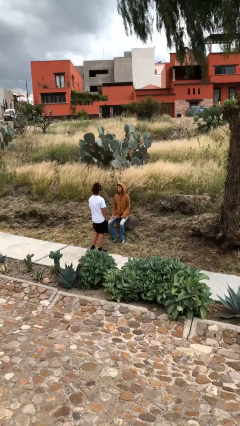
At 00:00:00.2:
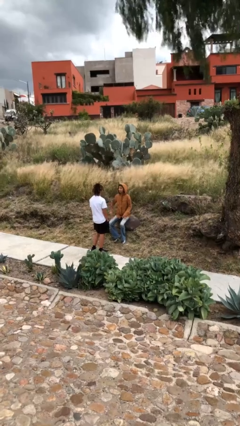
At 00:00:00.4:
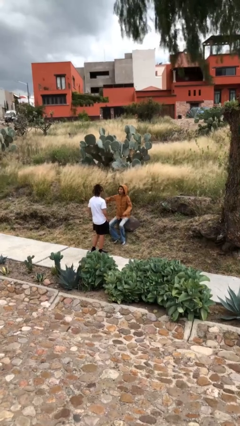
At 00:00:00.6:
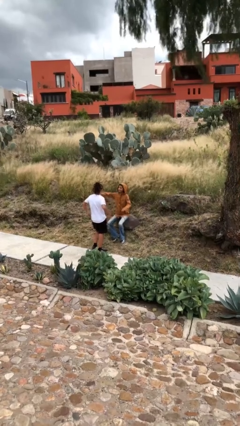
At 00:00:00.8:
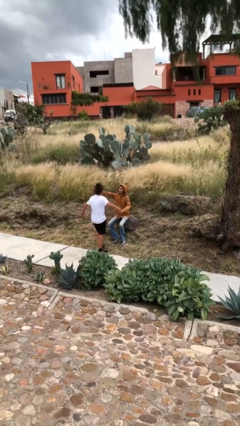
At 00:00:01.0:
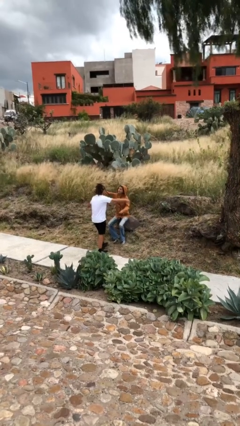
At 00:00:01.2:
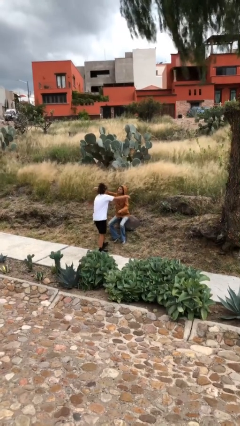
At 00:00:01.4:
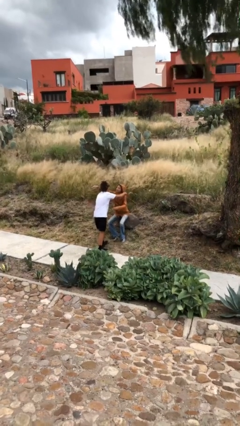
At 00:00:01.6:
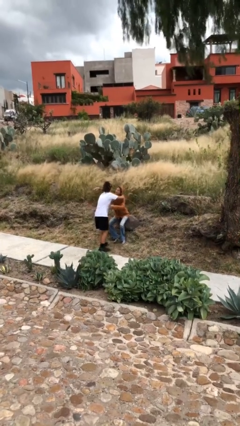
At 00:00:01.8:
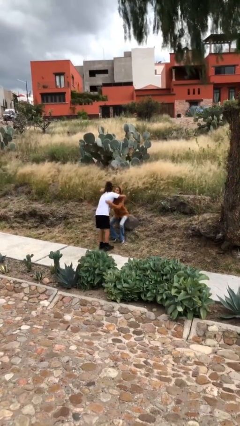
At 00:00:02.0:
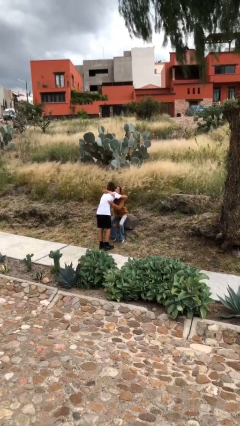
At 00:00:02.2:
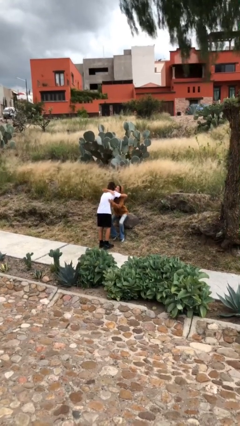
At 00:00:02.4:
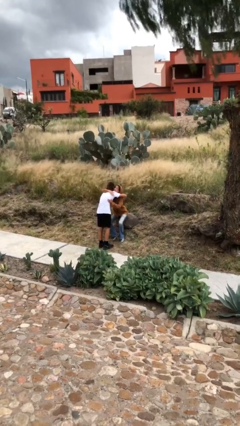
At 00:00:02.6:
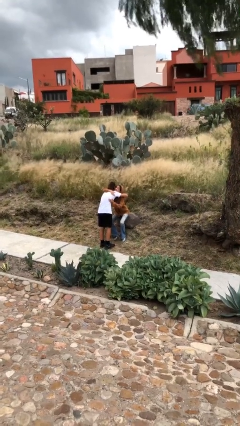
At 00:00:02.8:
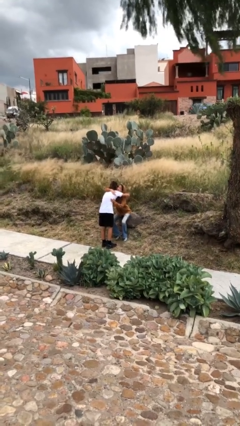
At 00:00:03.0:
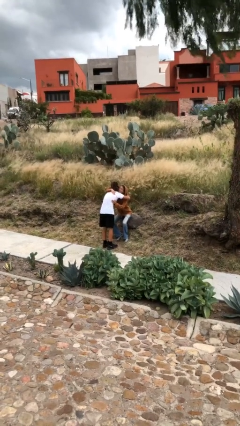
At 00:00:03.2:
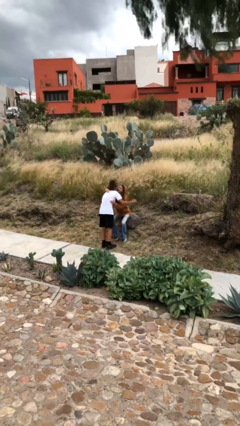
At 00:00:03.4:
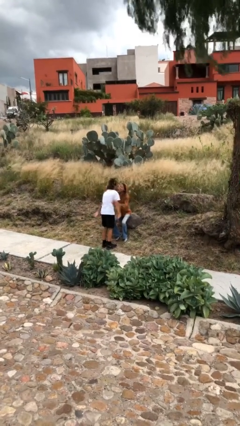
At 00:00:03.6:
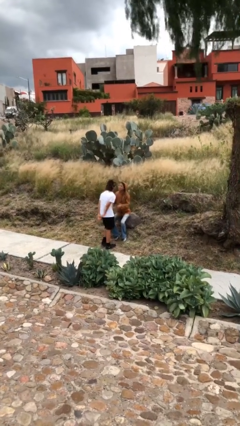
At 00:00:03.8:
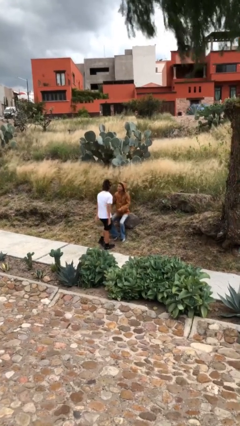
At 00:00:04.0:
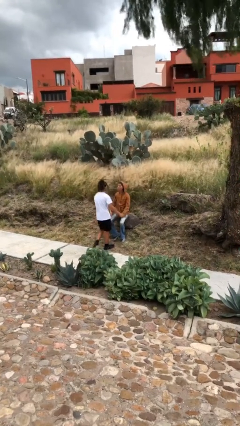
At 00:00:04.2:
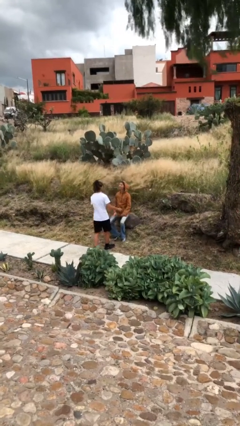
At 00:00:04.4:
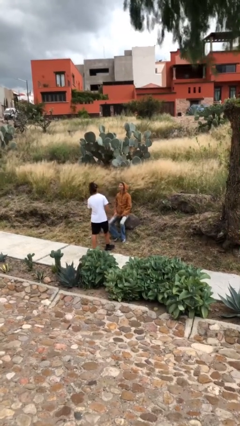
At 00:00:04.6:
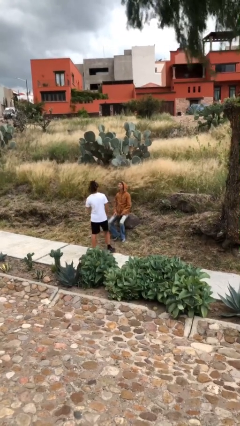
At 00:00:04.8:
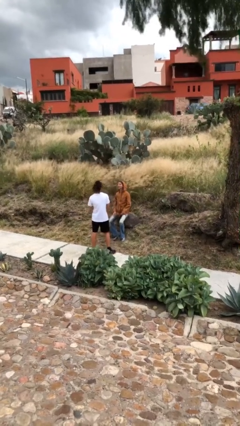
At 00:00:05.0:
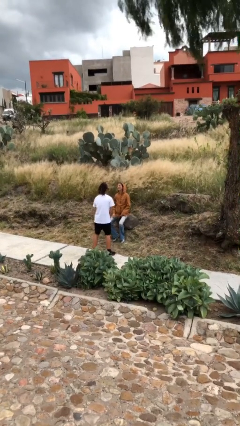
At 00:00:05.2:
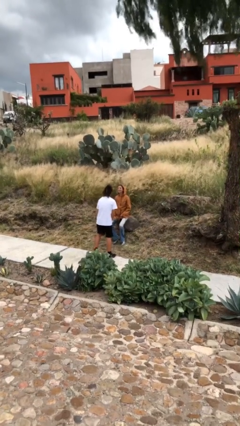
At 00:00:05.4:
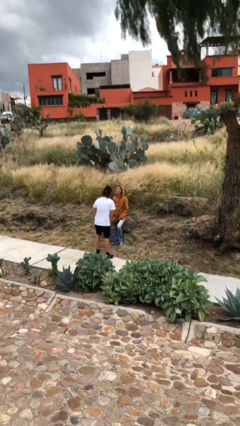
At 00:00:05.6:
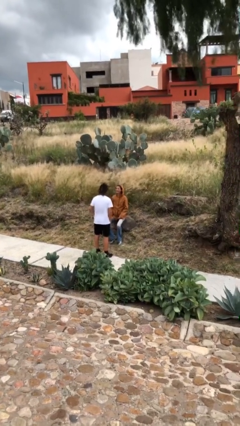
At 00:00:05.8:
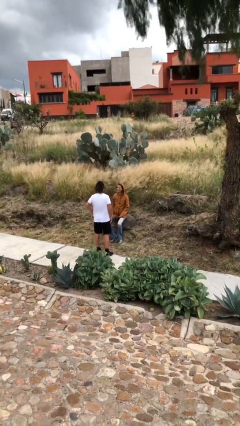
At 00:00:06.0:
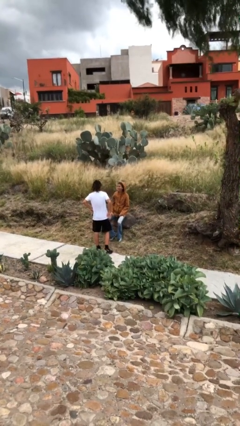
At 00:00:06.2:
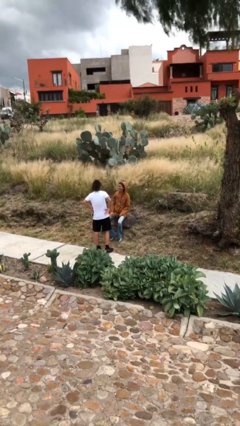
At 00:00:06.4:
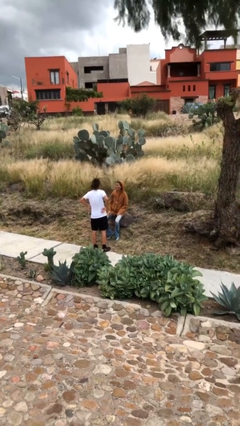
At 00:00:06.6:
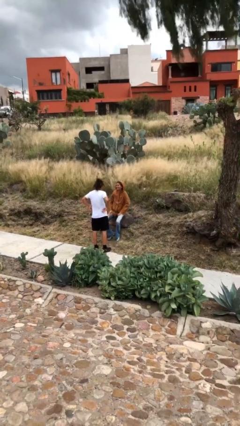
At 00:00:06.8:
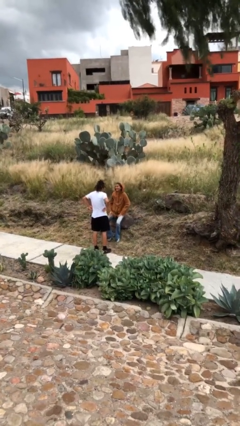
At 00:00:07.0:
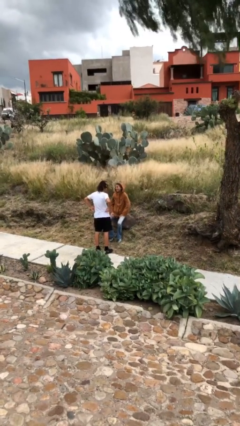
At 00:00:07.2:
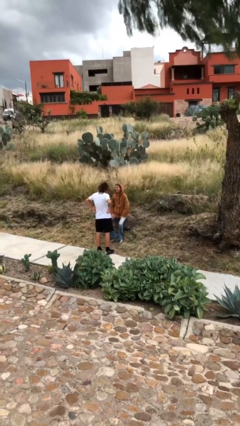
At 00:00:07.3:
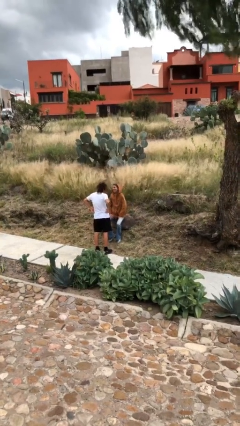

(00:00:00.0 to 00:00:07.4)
person embraces person

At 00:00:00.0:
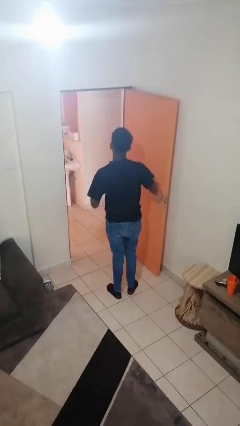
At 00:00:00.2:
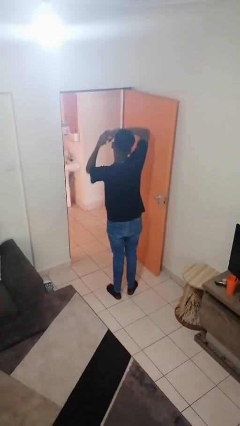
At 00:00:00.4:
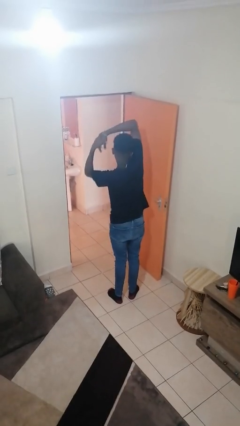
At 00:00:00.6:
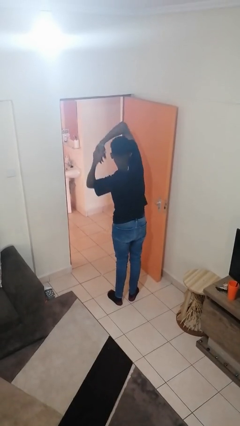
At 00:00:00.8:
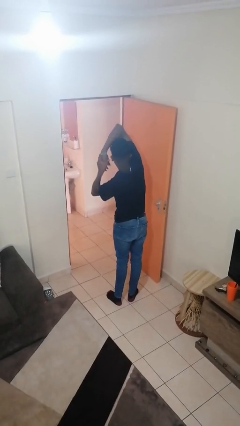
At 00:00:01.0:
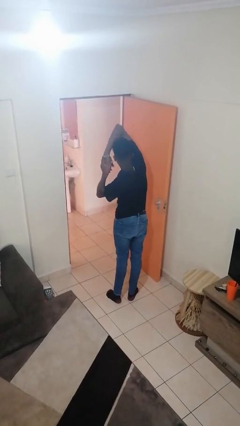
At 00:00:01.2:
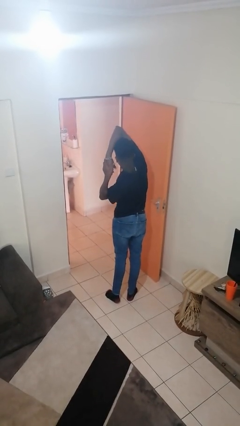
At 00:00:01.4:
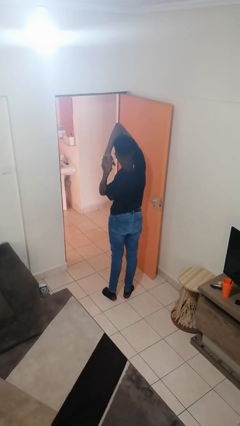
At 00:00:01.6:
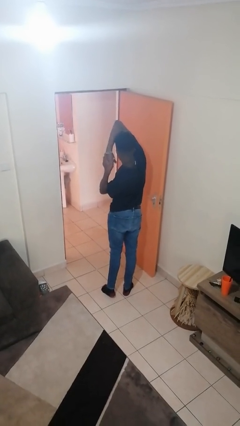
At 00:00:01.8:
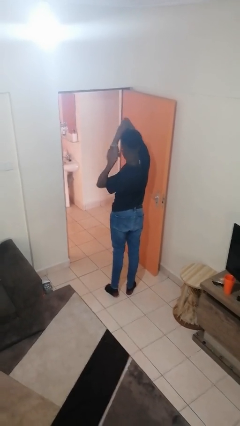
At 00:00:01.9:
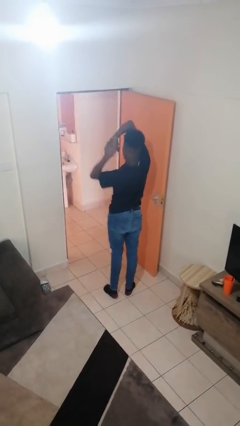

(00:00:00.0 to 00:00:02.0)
person stretches arms over head

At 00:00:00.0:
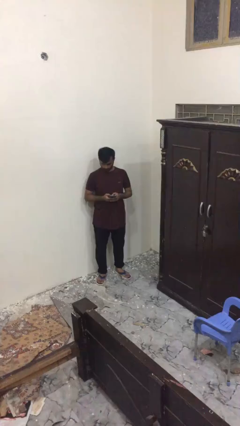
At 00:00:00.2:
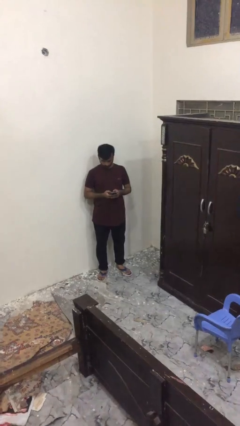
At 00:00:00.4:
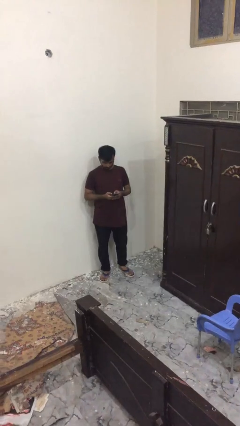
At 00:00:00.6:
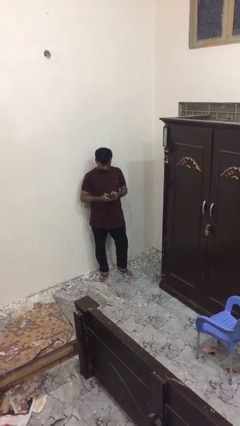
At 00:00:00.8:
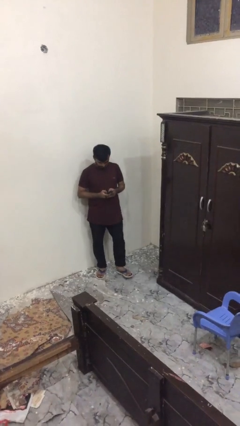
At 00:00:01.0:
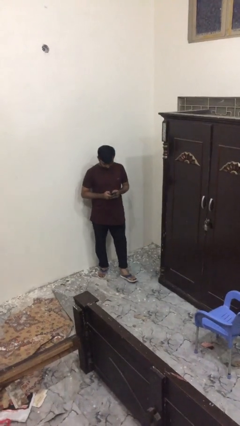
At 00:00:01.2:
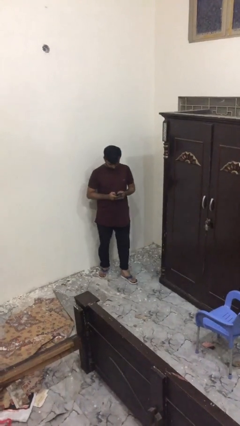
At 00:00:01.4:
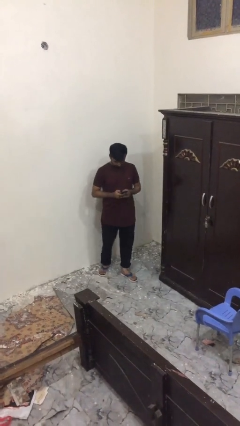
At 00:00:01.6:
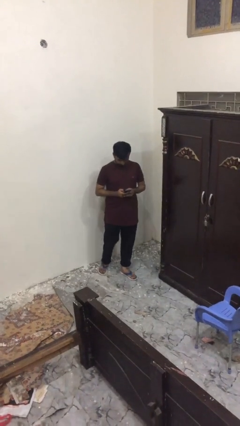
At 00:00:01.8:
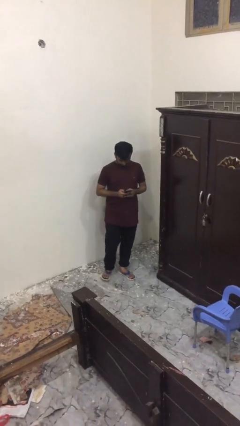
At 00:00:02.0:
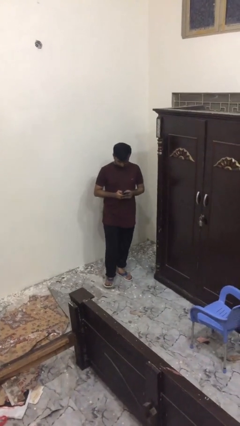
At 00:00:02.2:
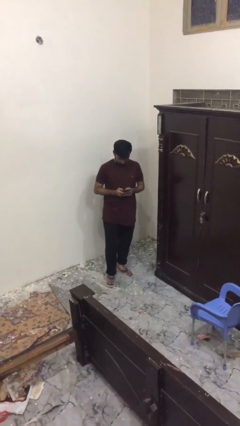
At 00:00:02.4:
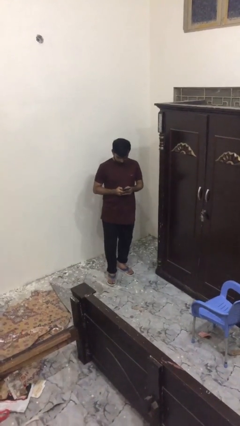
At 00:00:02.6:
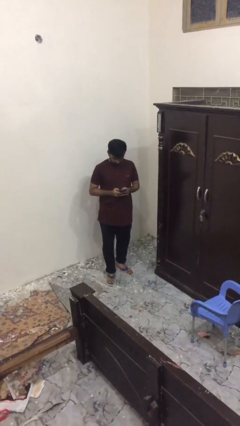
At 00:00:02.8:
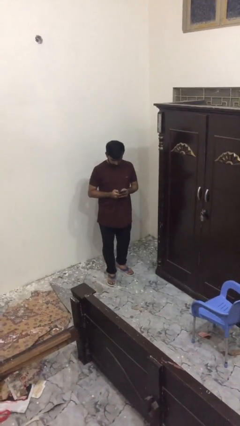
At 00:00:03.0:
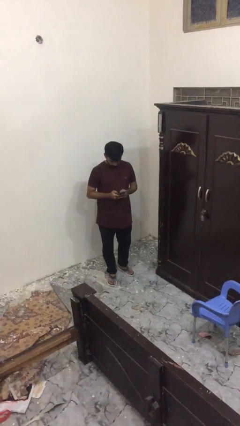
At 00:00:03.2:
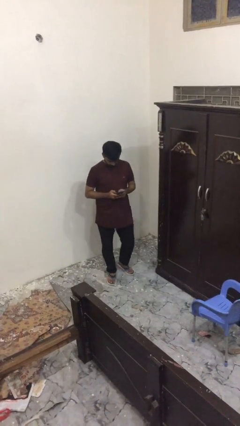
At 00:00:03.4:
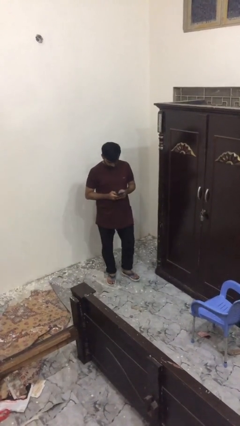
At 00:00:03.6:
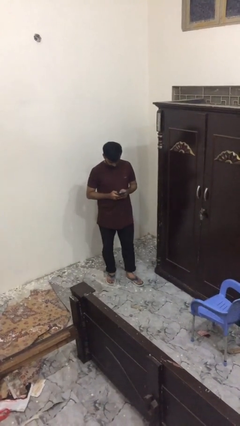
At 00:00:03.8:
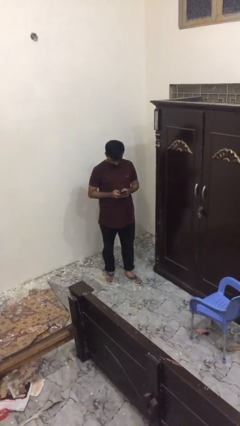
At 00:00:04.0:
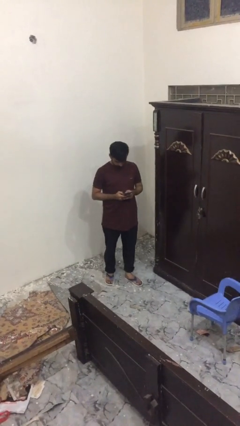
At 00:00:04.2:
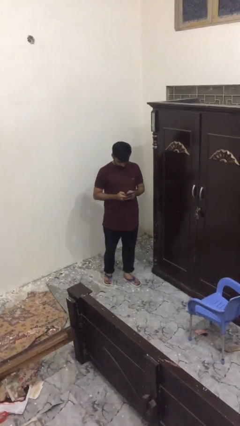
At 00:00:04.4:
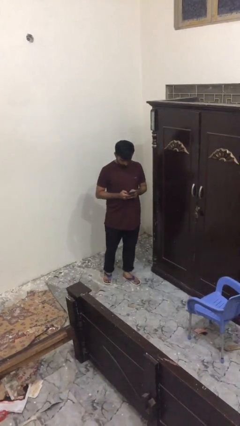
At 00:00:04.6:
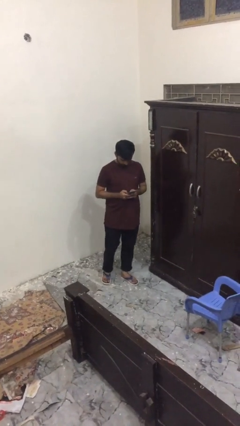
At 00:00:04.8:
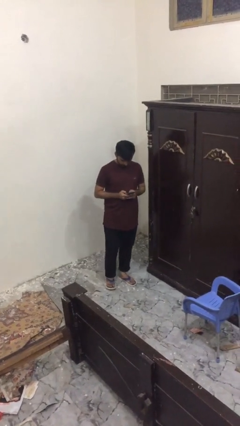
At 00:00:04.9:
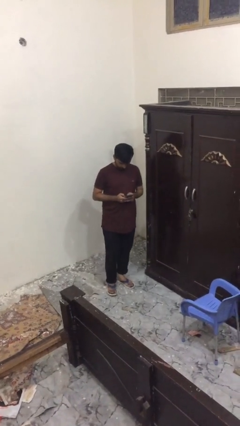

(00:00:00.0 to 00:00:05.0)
person texts on phone

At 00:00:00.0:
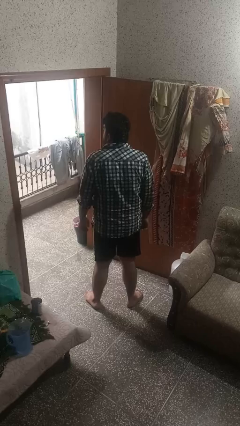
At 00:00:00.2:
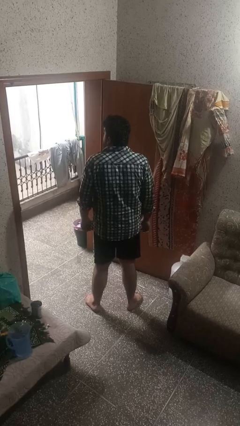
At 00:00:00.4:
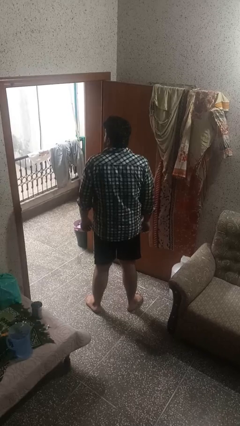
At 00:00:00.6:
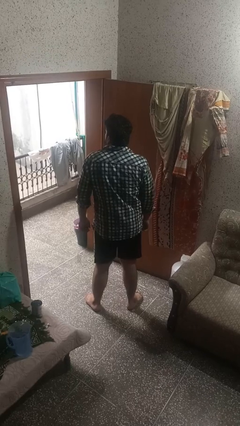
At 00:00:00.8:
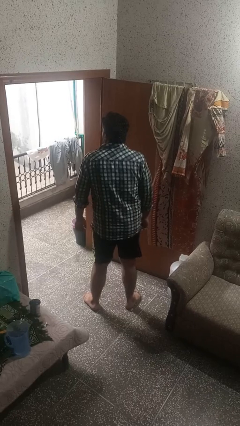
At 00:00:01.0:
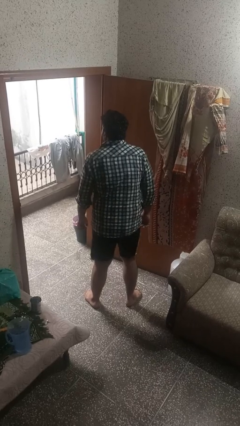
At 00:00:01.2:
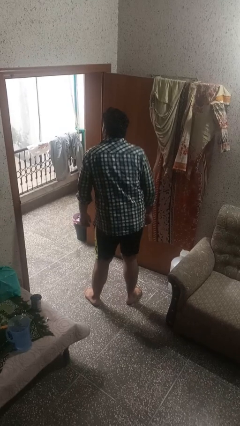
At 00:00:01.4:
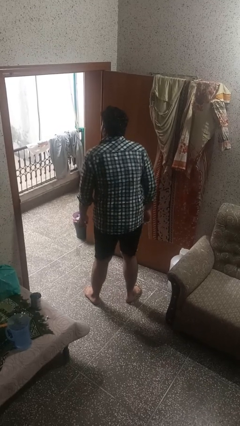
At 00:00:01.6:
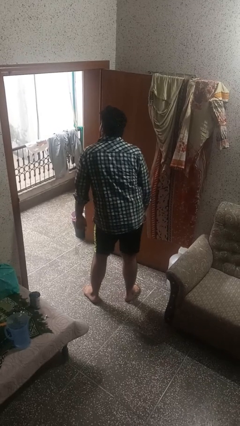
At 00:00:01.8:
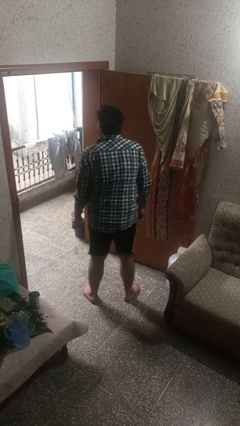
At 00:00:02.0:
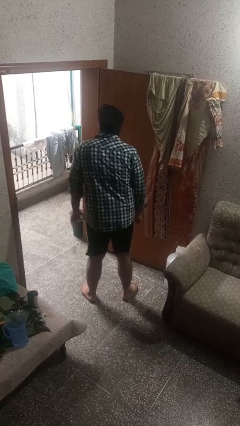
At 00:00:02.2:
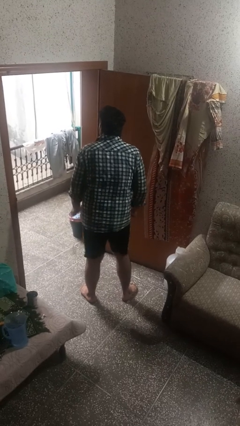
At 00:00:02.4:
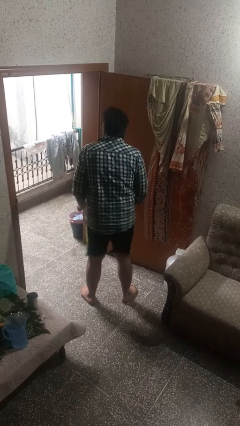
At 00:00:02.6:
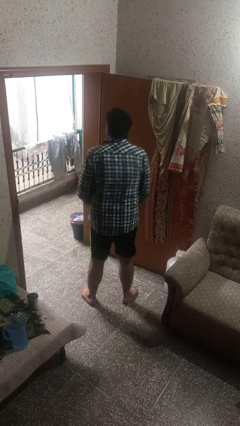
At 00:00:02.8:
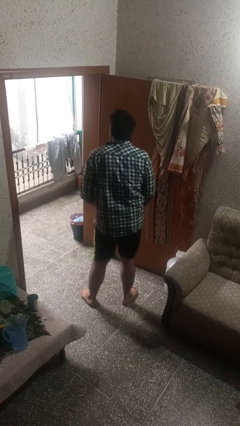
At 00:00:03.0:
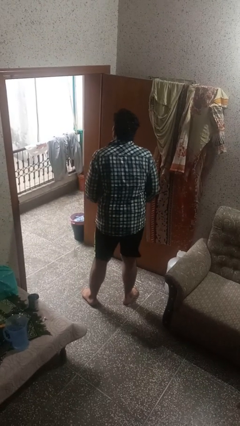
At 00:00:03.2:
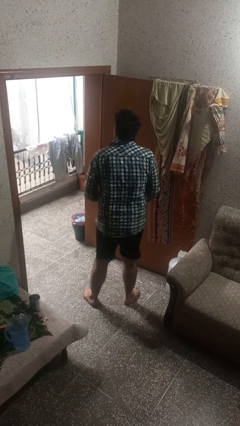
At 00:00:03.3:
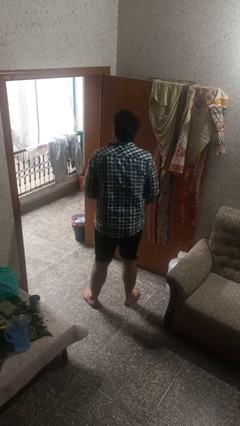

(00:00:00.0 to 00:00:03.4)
person wiggles hips
